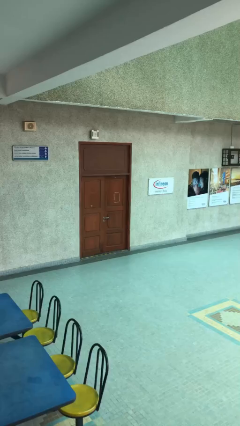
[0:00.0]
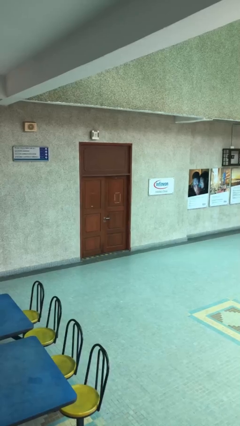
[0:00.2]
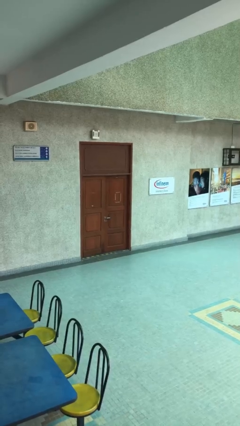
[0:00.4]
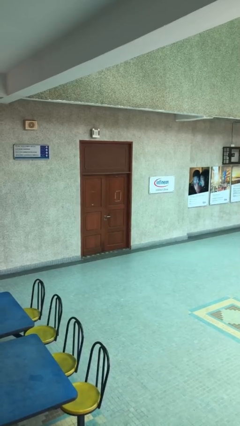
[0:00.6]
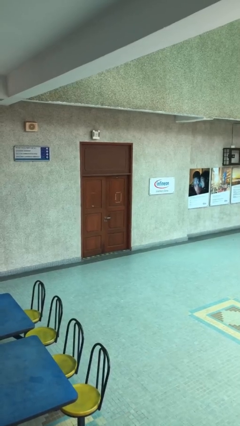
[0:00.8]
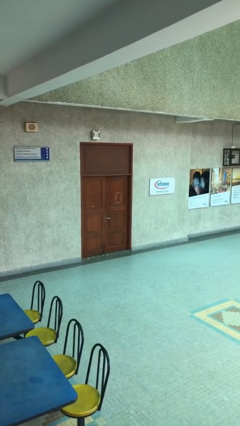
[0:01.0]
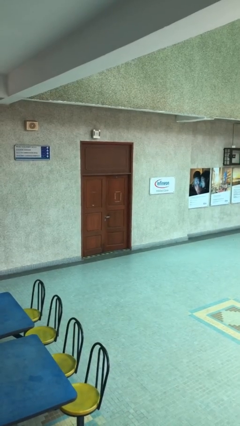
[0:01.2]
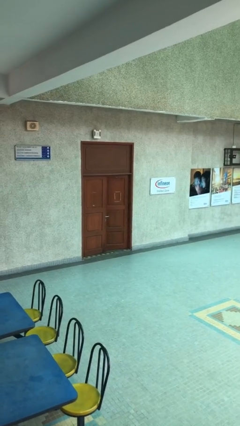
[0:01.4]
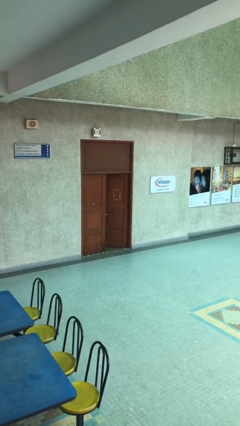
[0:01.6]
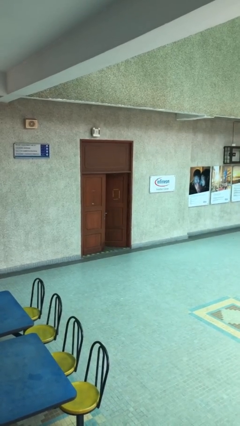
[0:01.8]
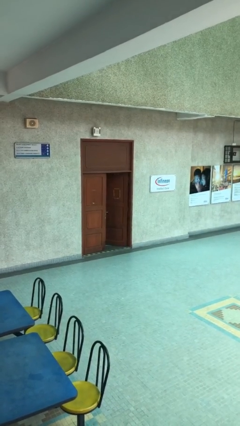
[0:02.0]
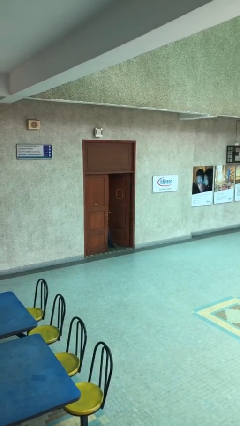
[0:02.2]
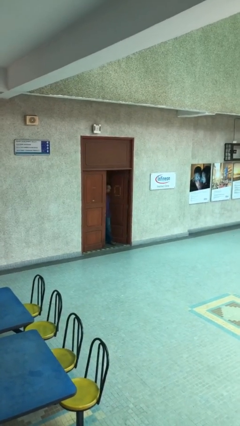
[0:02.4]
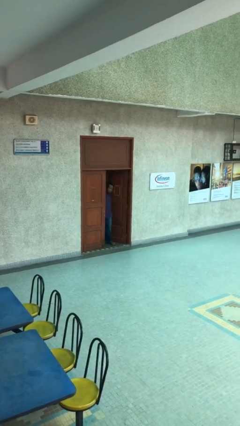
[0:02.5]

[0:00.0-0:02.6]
person opens facility door

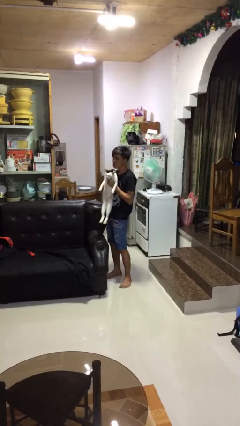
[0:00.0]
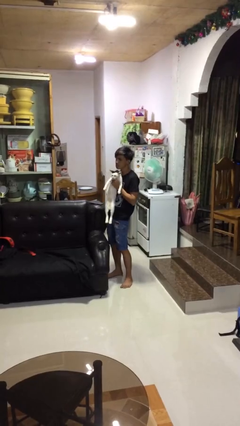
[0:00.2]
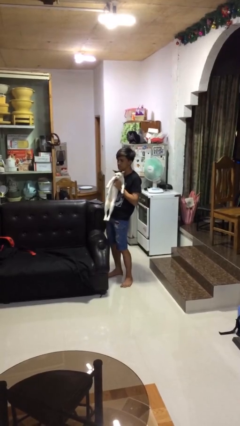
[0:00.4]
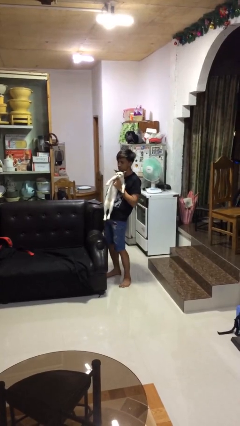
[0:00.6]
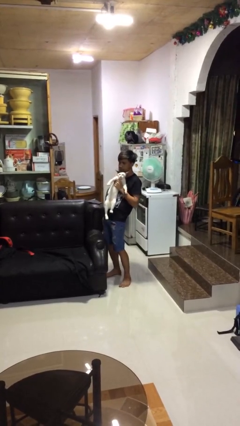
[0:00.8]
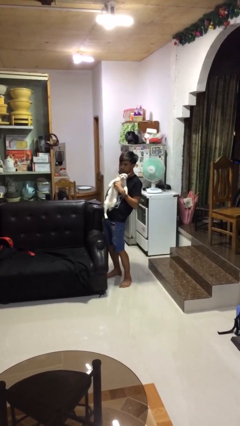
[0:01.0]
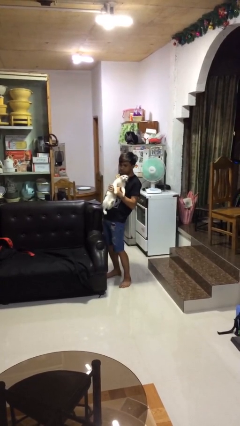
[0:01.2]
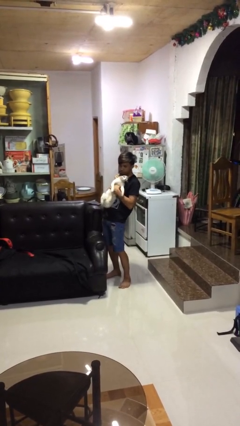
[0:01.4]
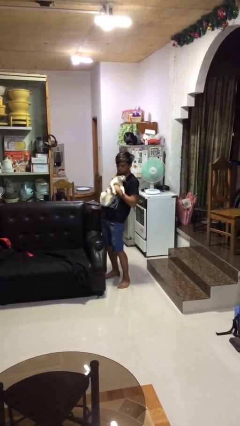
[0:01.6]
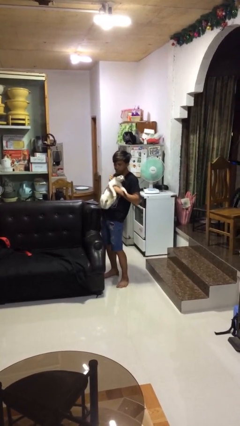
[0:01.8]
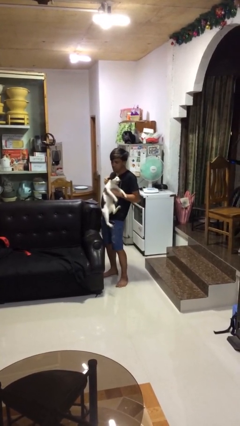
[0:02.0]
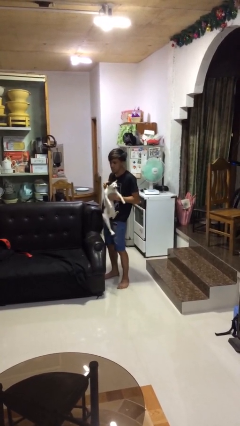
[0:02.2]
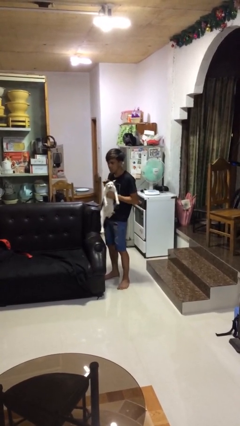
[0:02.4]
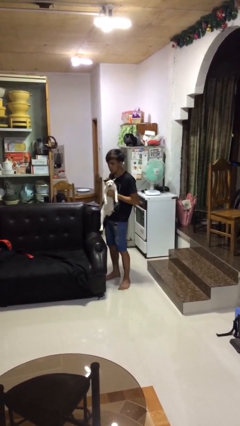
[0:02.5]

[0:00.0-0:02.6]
person hugs cat

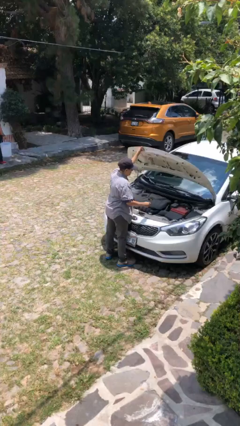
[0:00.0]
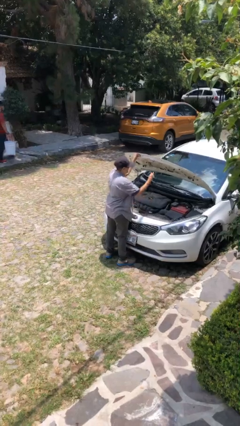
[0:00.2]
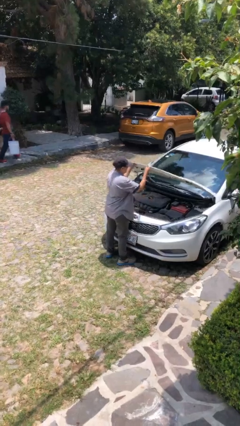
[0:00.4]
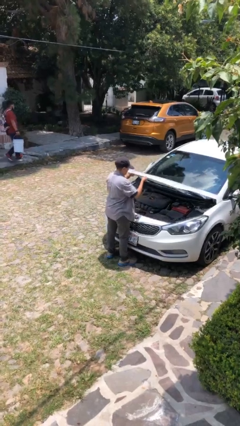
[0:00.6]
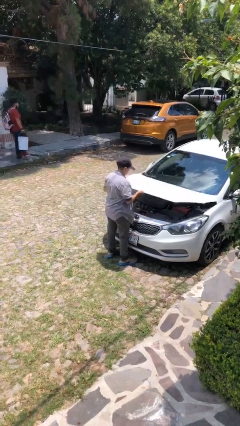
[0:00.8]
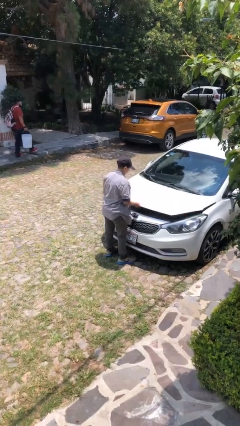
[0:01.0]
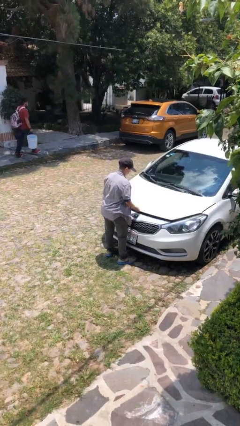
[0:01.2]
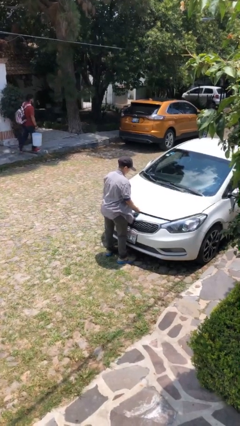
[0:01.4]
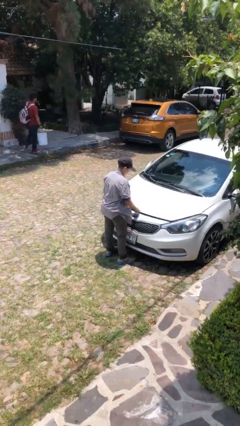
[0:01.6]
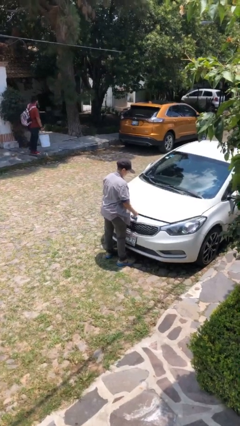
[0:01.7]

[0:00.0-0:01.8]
person closes car hood

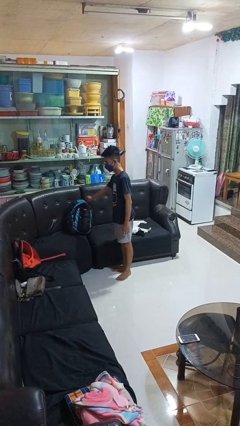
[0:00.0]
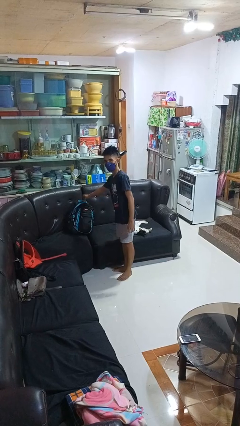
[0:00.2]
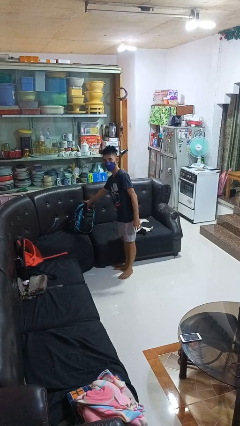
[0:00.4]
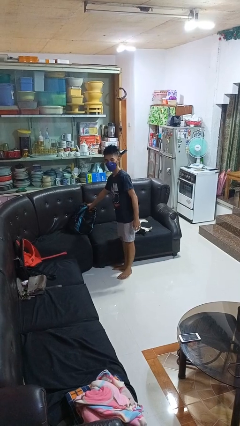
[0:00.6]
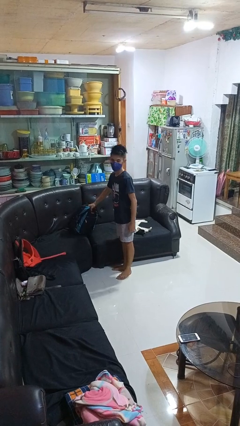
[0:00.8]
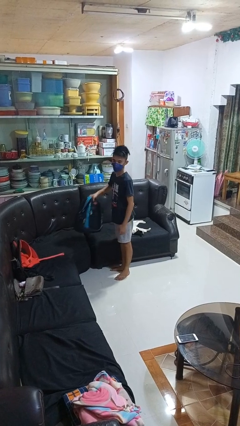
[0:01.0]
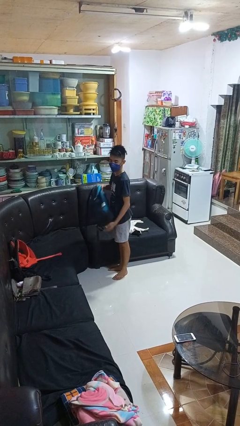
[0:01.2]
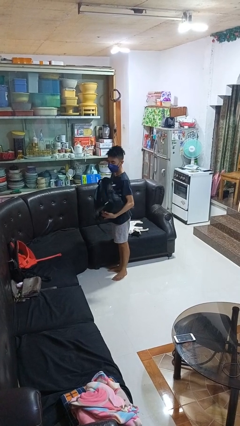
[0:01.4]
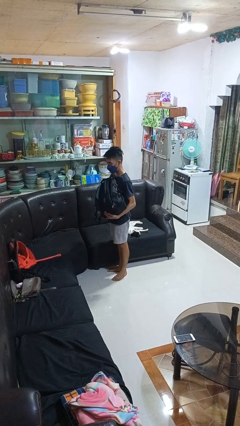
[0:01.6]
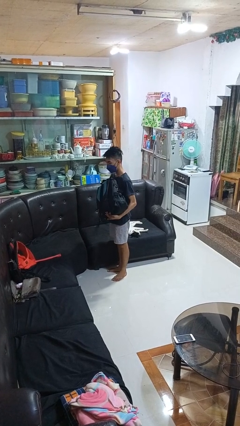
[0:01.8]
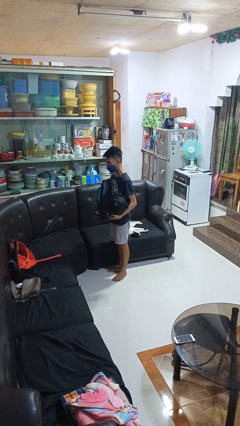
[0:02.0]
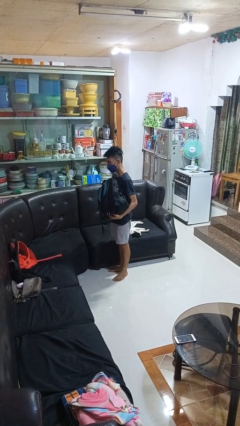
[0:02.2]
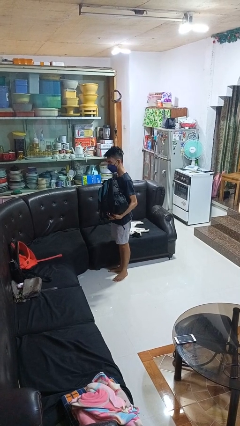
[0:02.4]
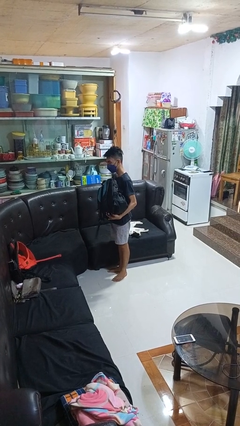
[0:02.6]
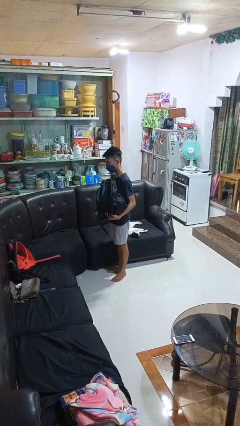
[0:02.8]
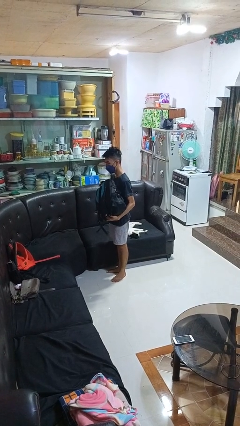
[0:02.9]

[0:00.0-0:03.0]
person picks up object from couch

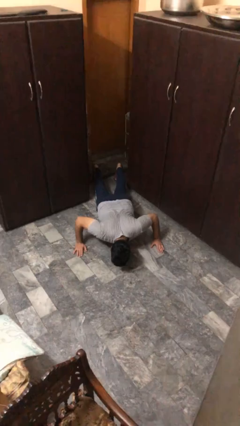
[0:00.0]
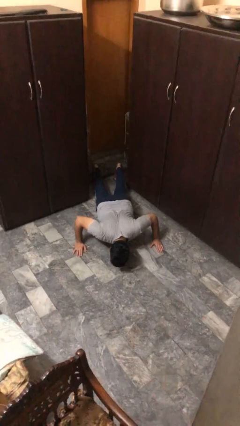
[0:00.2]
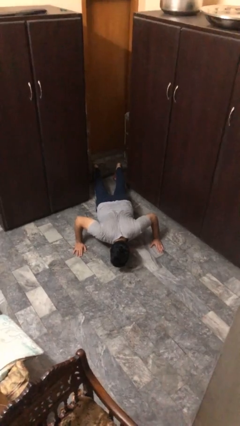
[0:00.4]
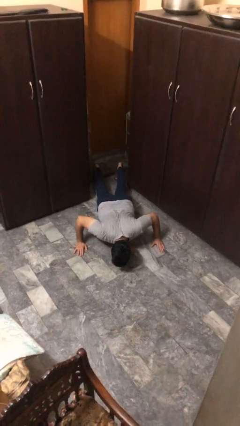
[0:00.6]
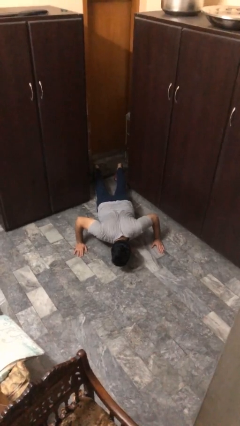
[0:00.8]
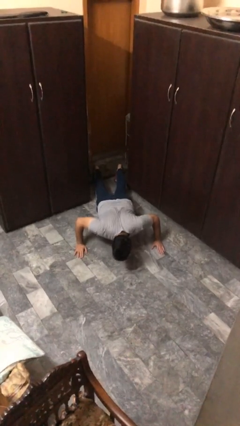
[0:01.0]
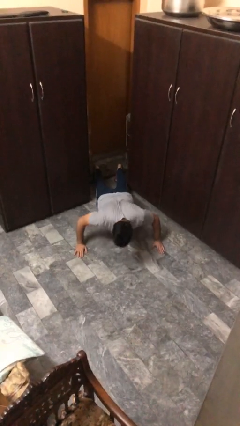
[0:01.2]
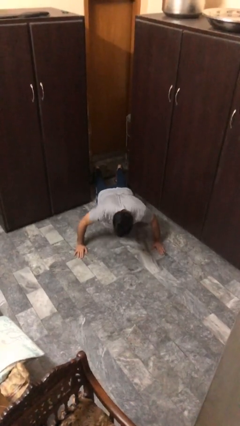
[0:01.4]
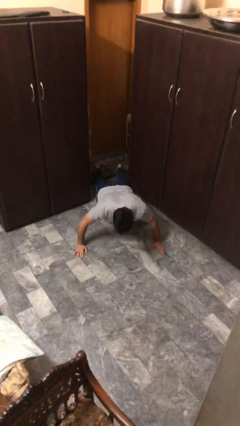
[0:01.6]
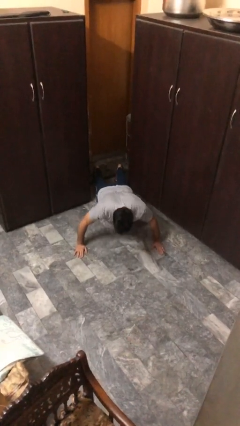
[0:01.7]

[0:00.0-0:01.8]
person exercises with pushup

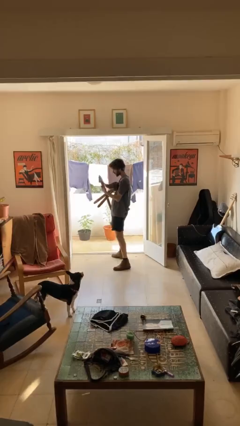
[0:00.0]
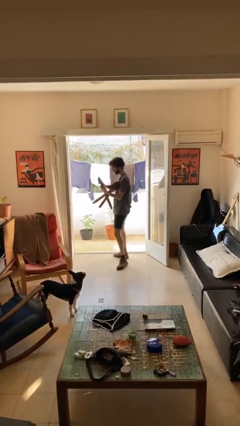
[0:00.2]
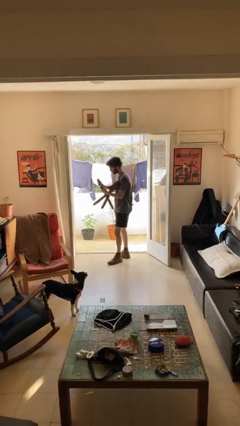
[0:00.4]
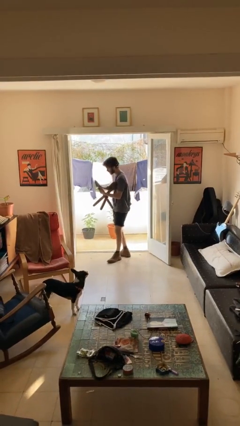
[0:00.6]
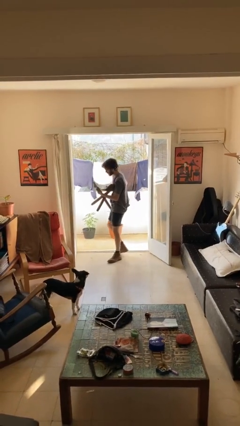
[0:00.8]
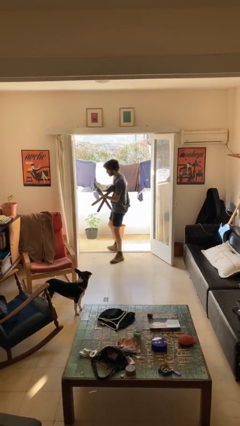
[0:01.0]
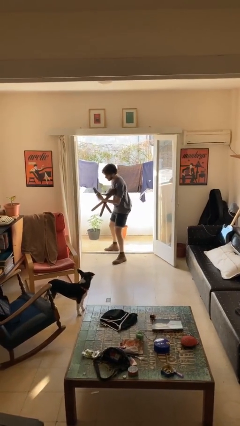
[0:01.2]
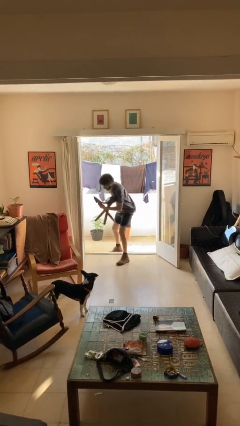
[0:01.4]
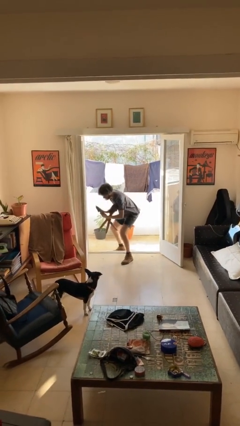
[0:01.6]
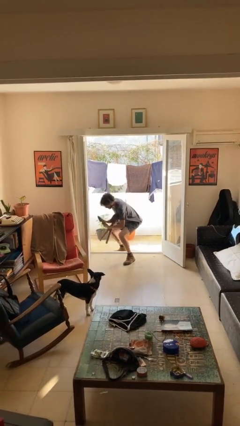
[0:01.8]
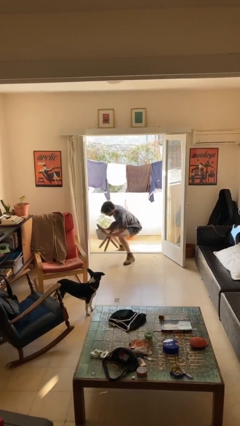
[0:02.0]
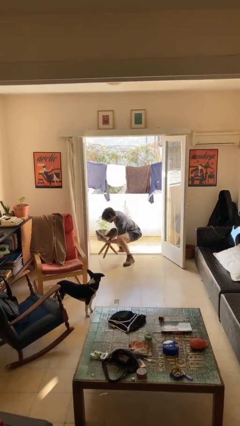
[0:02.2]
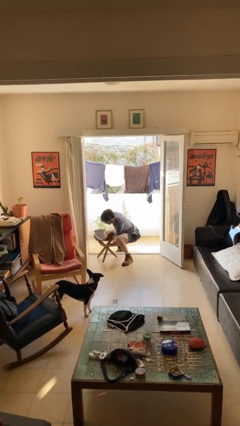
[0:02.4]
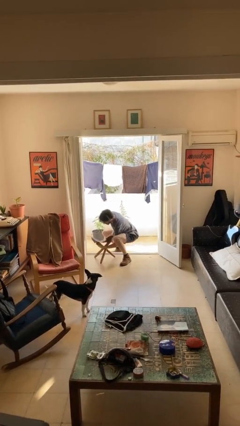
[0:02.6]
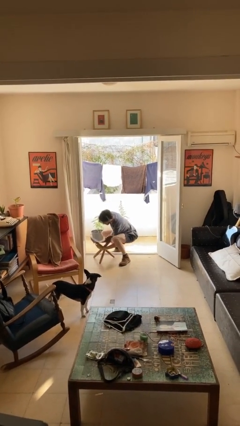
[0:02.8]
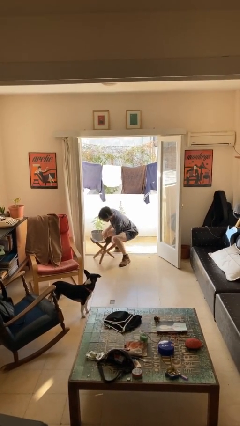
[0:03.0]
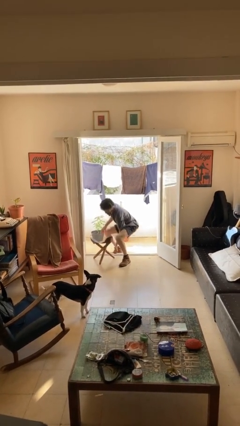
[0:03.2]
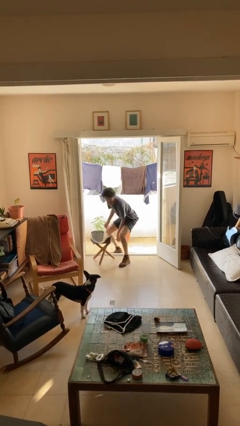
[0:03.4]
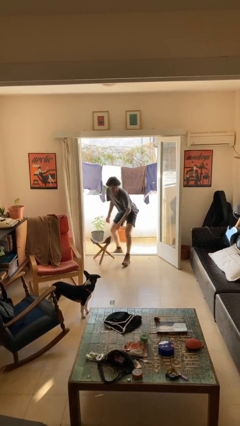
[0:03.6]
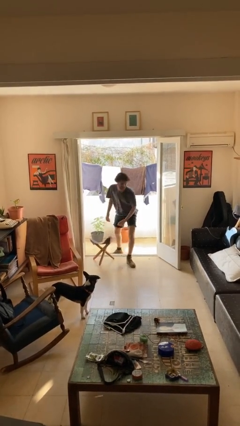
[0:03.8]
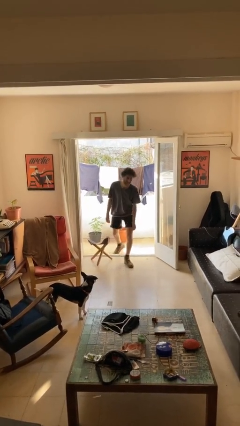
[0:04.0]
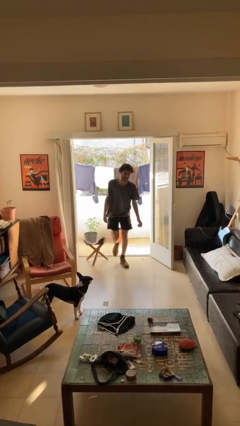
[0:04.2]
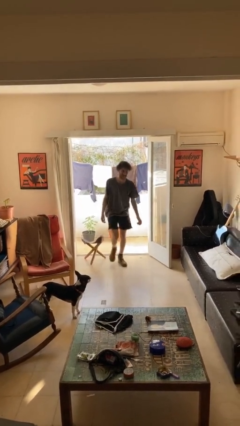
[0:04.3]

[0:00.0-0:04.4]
person puts down object on floor

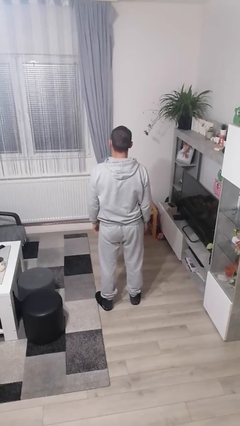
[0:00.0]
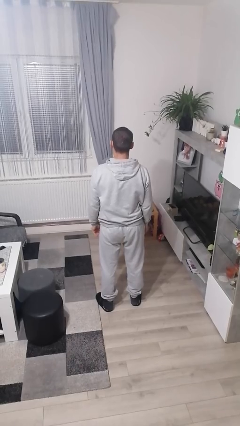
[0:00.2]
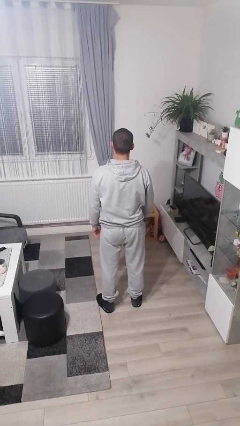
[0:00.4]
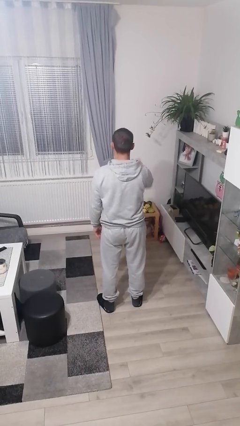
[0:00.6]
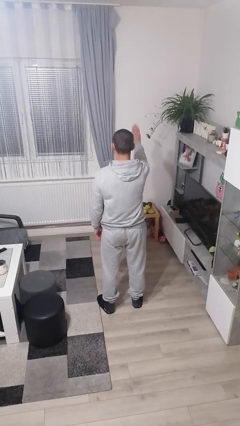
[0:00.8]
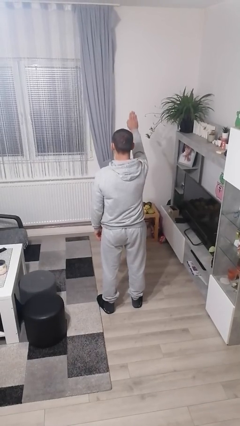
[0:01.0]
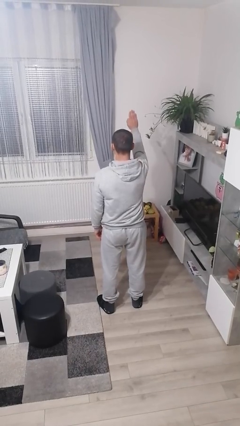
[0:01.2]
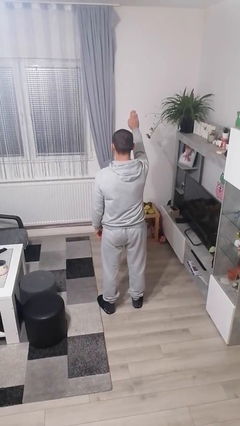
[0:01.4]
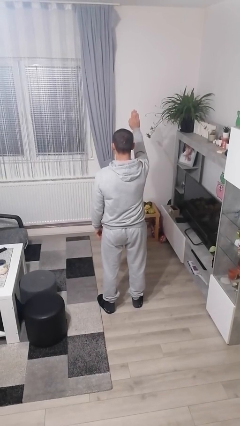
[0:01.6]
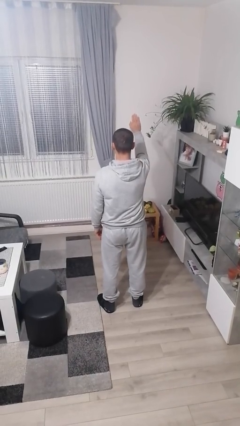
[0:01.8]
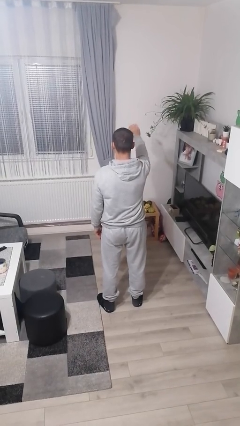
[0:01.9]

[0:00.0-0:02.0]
person gestures stop
